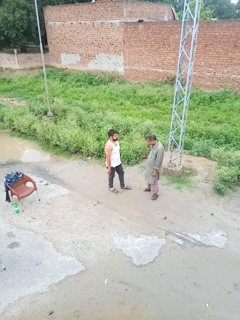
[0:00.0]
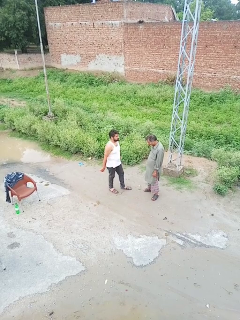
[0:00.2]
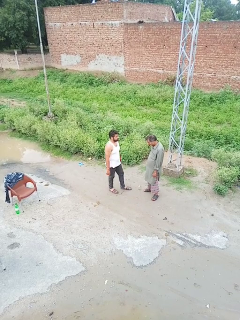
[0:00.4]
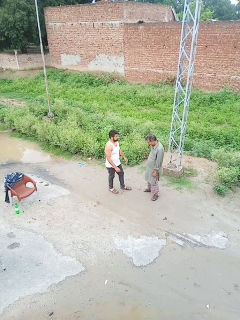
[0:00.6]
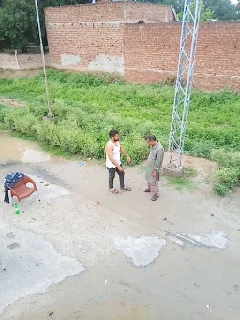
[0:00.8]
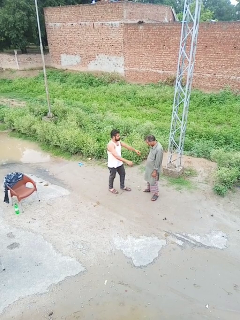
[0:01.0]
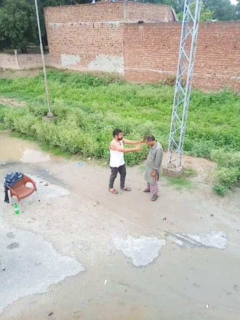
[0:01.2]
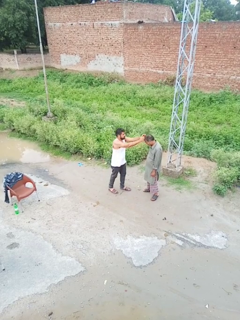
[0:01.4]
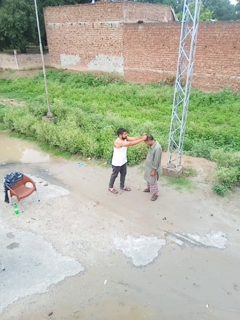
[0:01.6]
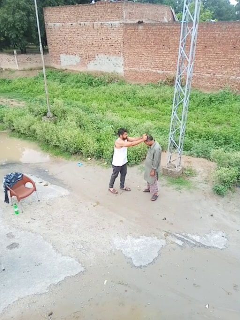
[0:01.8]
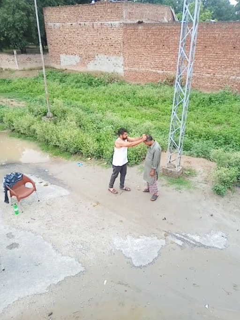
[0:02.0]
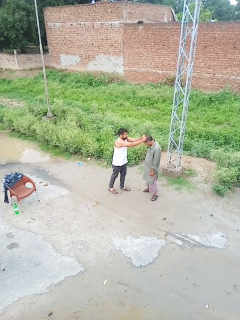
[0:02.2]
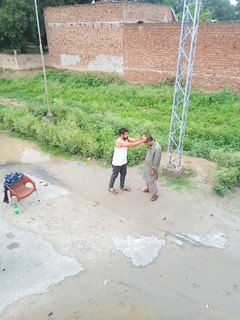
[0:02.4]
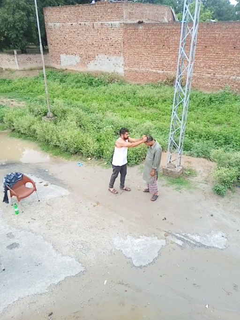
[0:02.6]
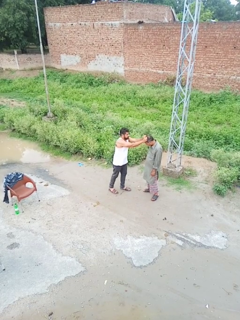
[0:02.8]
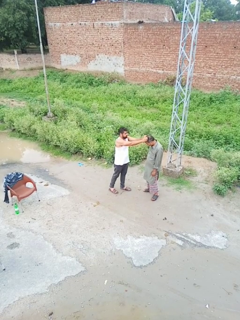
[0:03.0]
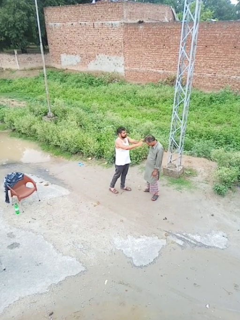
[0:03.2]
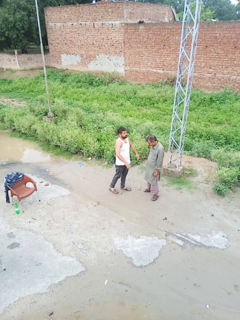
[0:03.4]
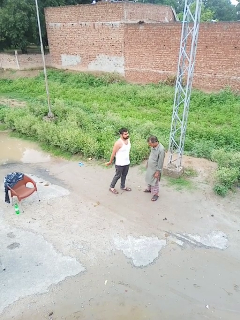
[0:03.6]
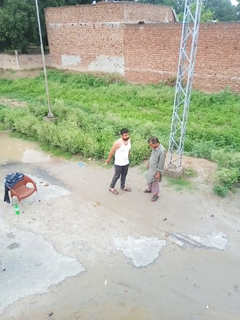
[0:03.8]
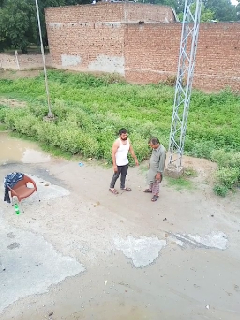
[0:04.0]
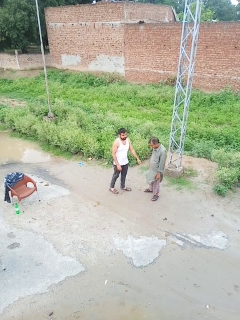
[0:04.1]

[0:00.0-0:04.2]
person grabs person by hair

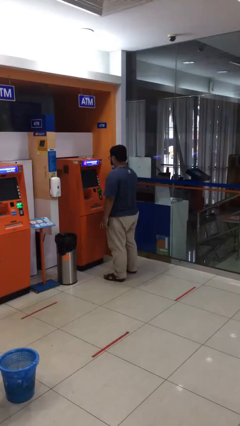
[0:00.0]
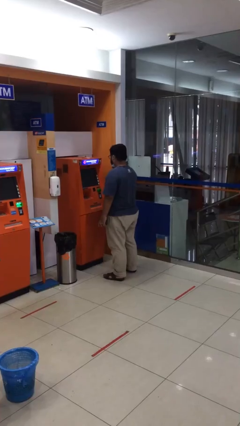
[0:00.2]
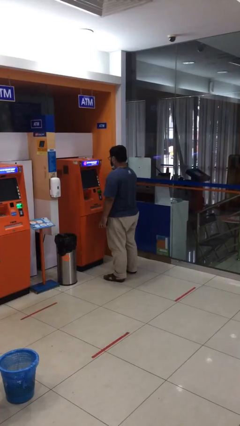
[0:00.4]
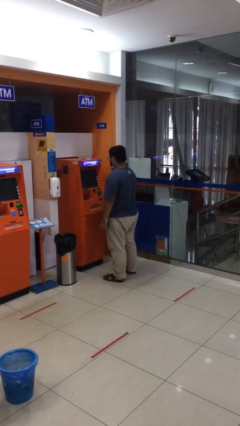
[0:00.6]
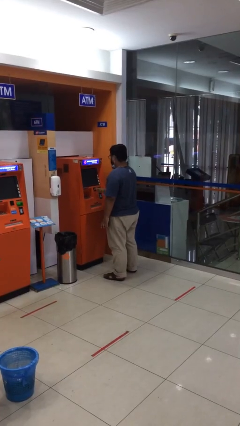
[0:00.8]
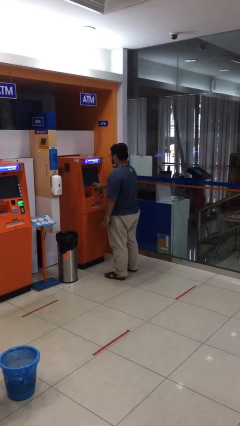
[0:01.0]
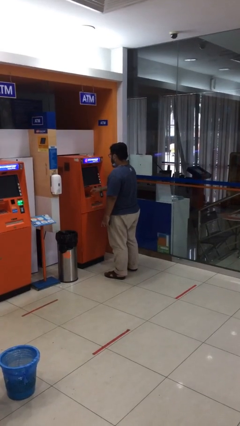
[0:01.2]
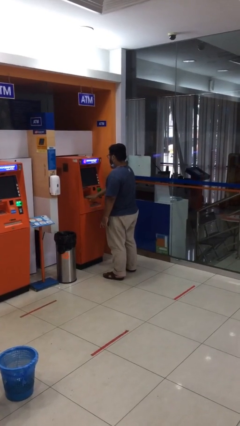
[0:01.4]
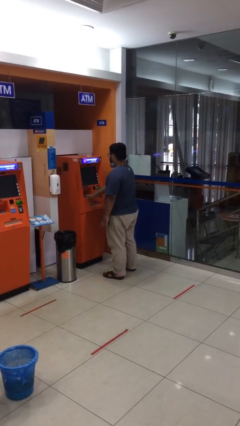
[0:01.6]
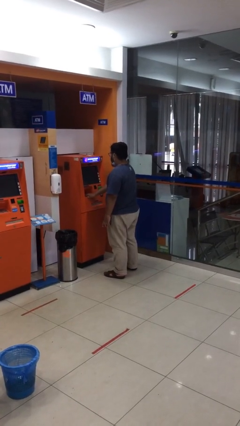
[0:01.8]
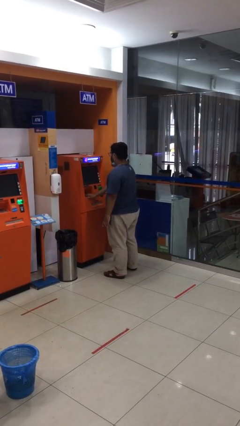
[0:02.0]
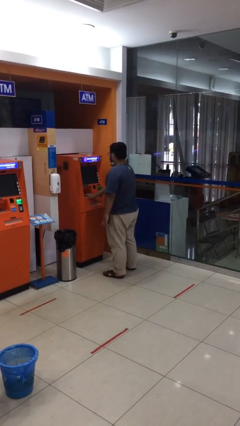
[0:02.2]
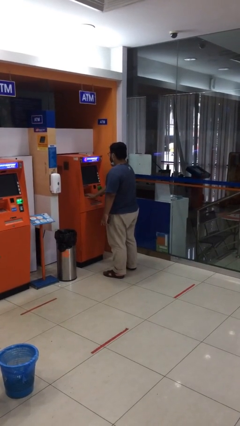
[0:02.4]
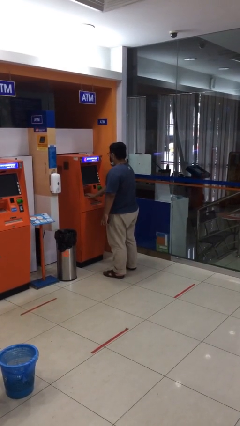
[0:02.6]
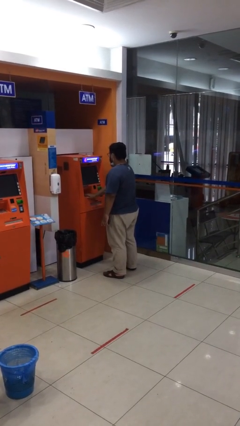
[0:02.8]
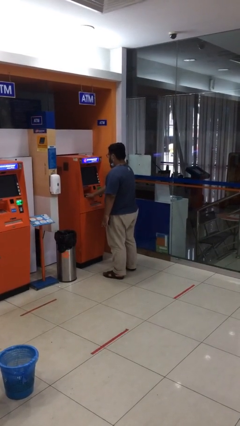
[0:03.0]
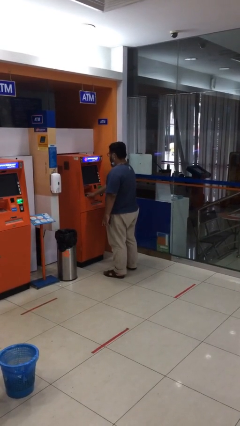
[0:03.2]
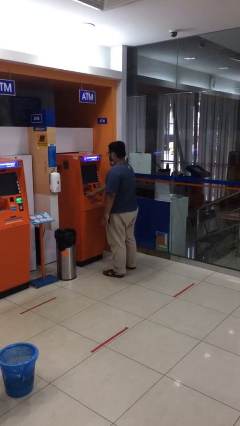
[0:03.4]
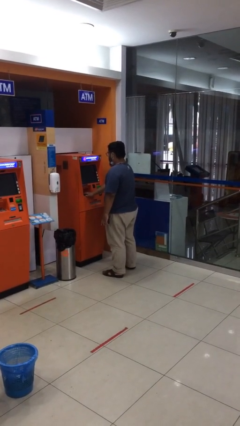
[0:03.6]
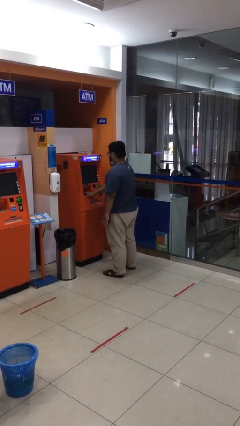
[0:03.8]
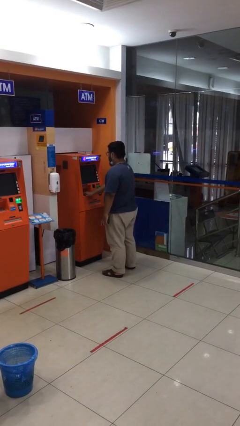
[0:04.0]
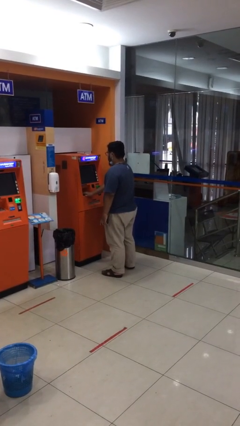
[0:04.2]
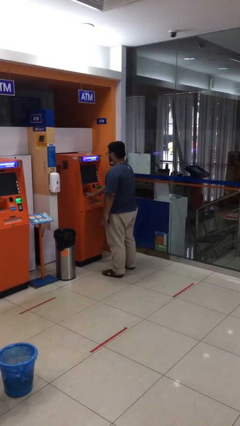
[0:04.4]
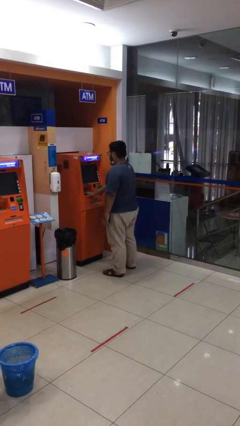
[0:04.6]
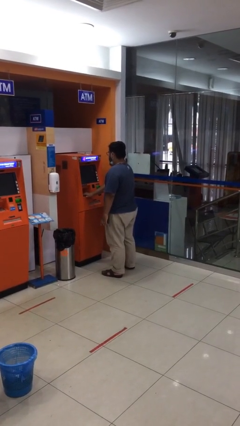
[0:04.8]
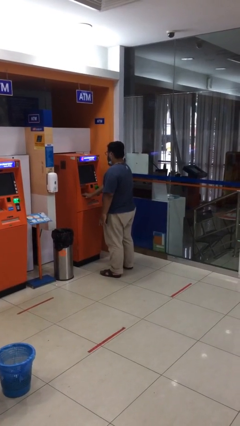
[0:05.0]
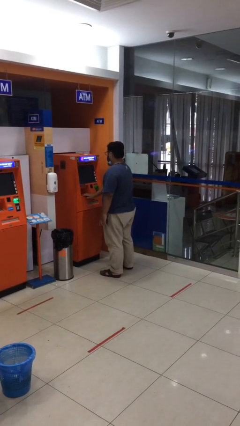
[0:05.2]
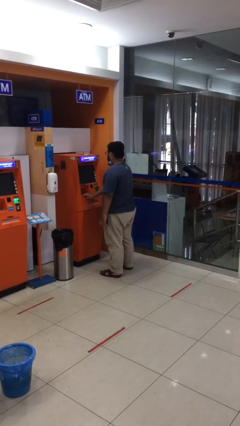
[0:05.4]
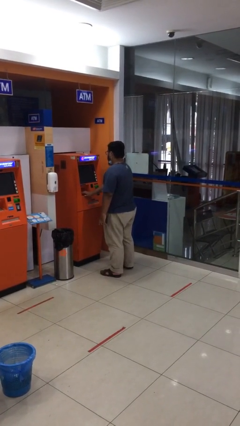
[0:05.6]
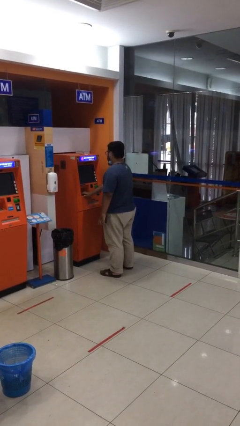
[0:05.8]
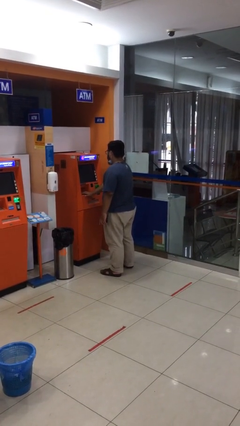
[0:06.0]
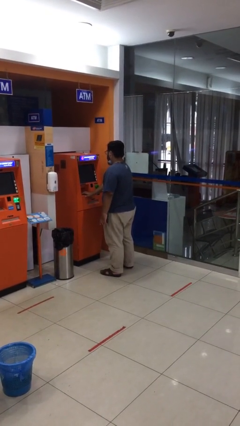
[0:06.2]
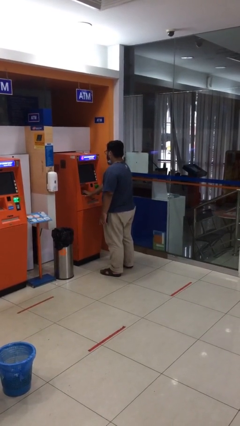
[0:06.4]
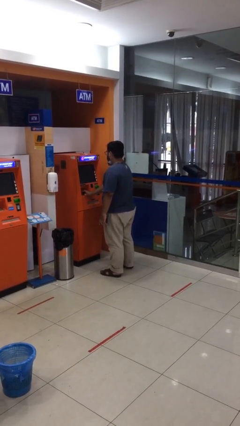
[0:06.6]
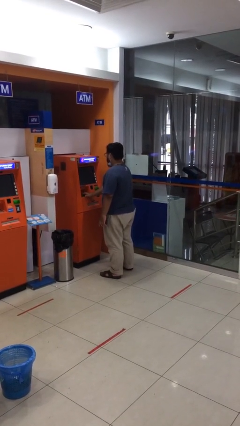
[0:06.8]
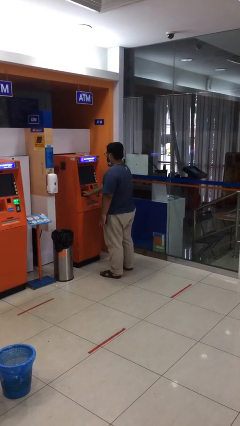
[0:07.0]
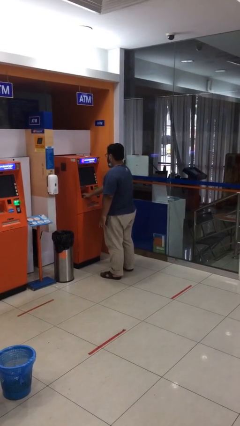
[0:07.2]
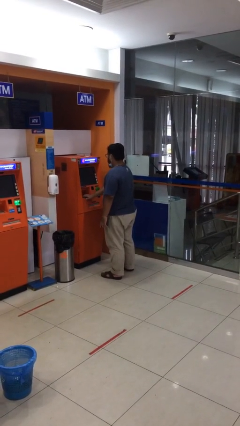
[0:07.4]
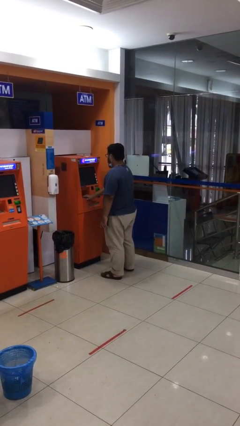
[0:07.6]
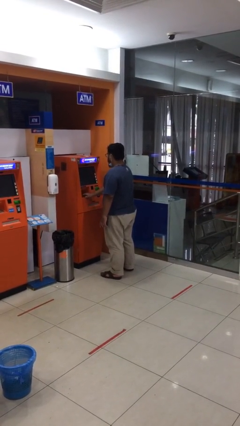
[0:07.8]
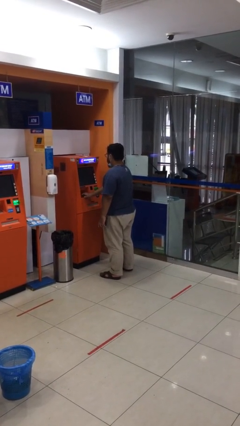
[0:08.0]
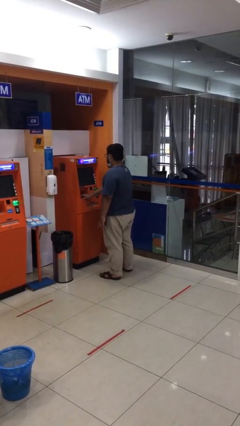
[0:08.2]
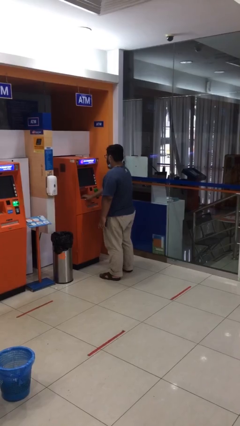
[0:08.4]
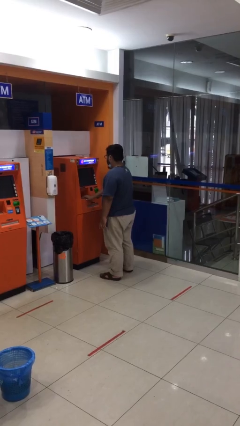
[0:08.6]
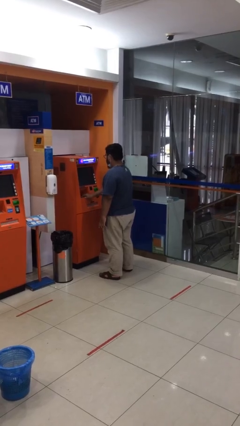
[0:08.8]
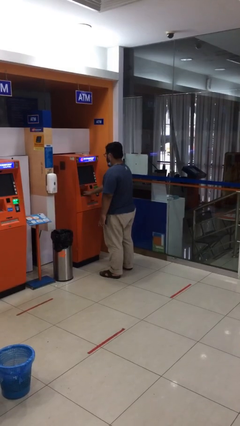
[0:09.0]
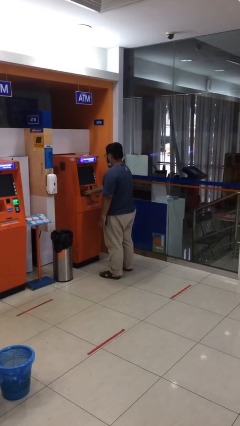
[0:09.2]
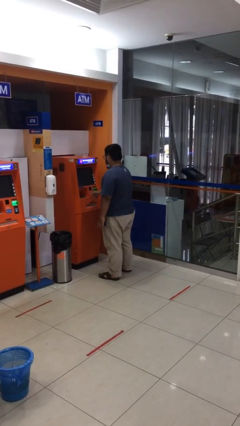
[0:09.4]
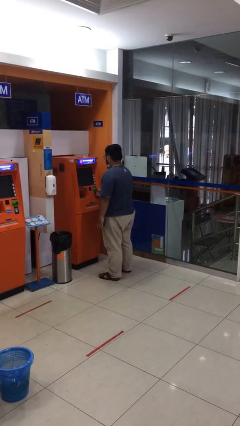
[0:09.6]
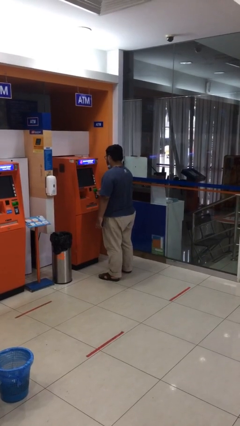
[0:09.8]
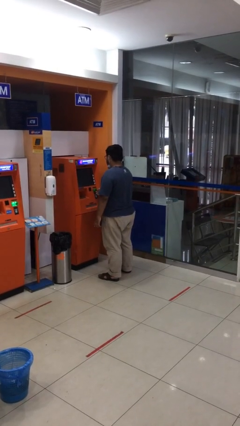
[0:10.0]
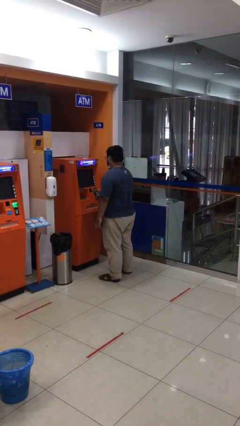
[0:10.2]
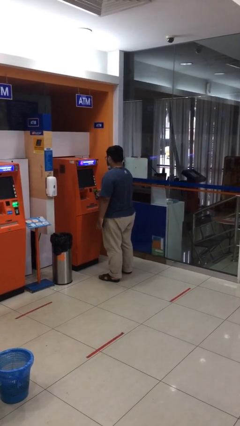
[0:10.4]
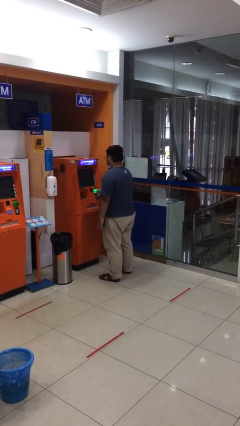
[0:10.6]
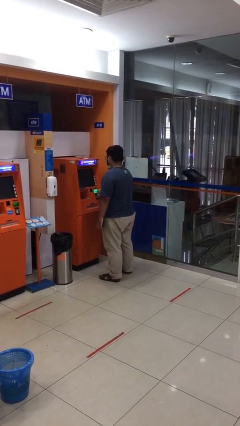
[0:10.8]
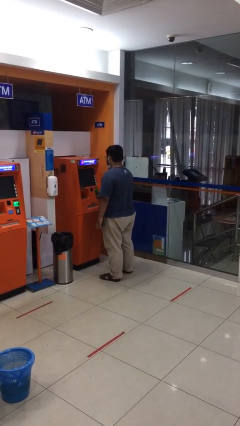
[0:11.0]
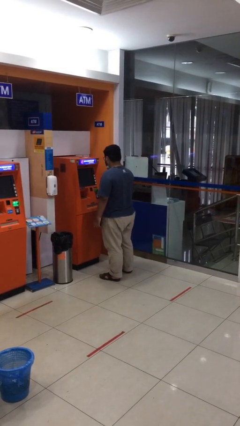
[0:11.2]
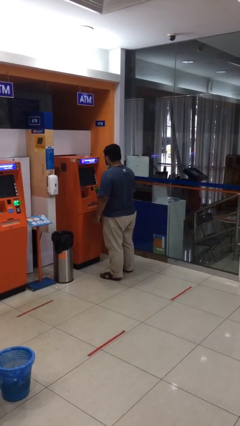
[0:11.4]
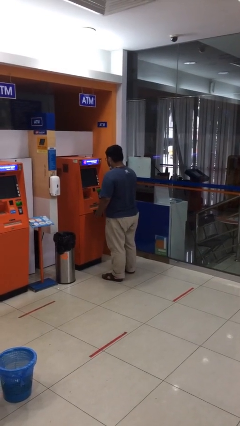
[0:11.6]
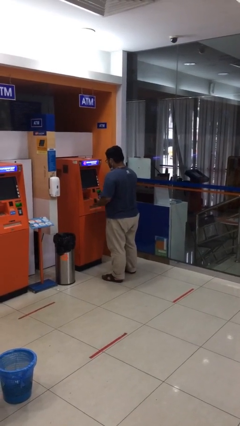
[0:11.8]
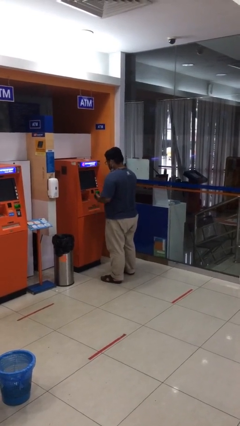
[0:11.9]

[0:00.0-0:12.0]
person purchases from machine

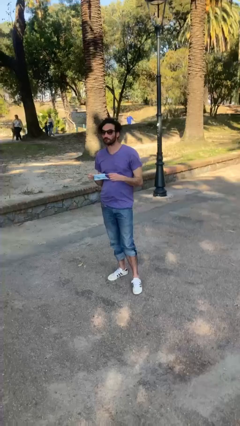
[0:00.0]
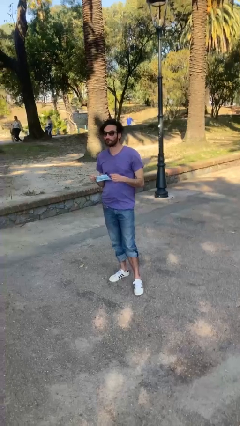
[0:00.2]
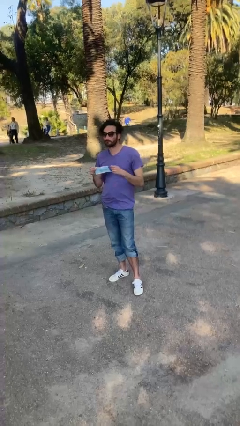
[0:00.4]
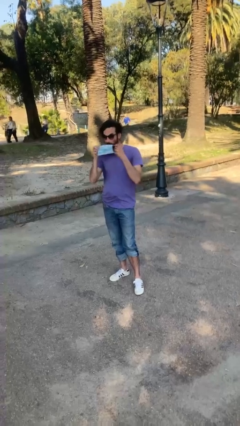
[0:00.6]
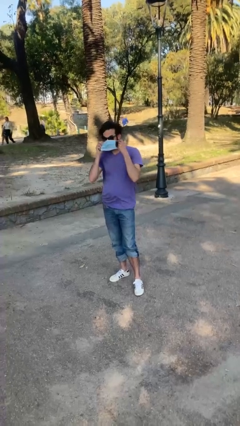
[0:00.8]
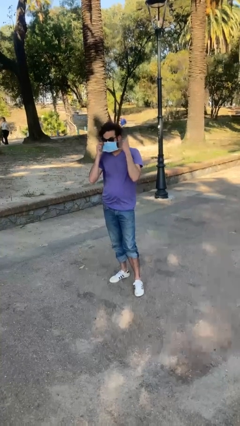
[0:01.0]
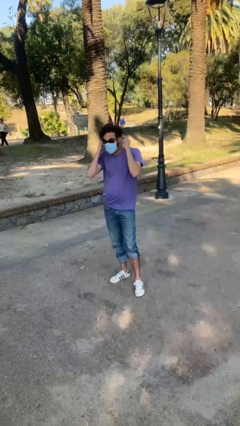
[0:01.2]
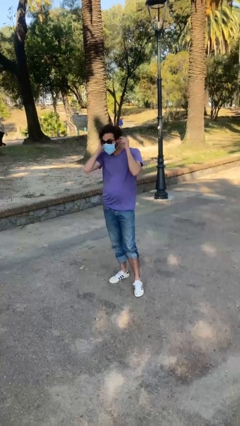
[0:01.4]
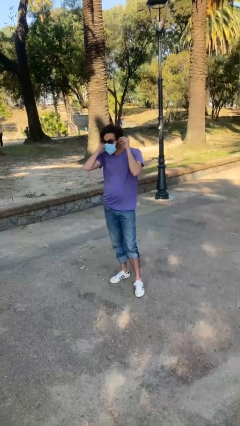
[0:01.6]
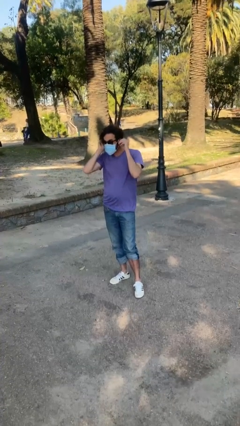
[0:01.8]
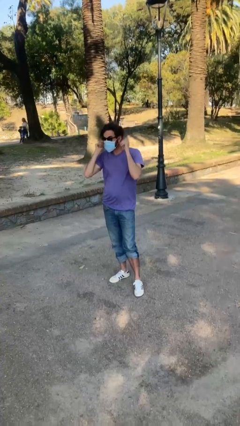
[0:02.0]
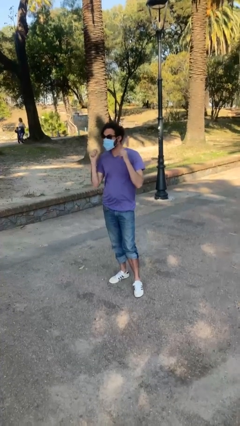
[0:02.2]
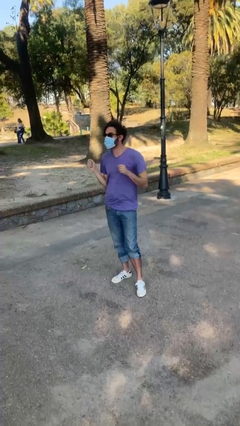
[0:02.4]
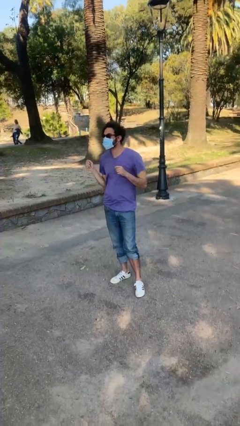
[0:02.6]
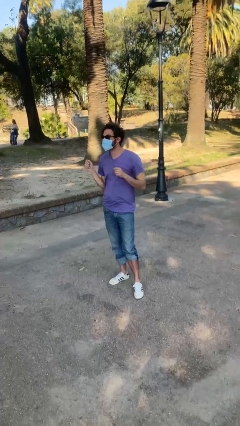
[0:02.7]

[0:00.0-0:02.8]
person puts on facemask
